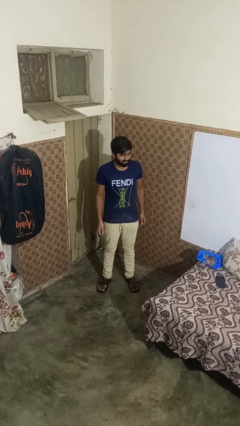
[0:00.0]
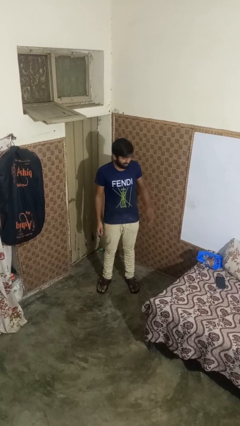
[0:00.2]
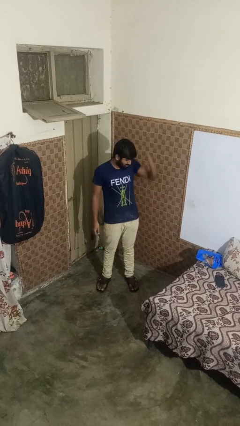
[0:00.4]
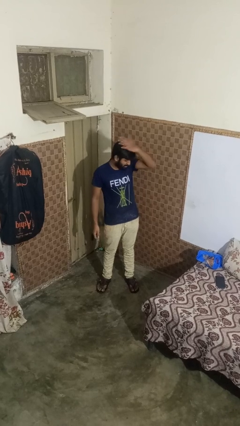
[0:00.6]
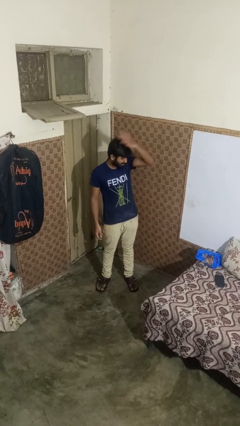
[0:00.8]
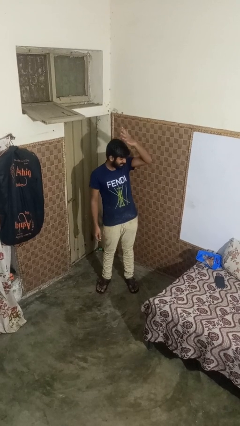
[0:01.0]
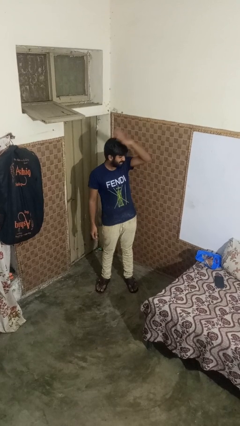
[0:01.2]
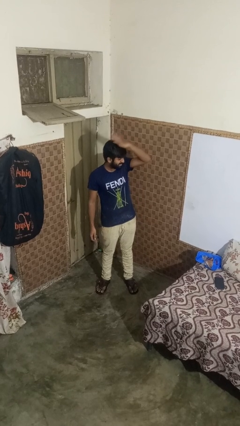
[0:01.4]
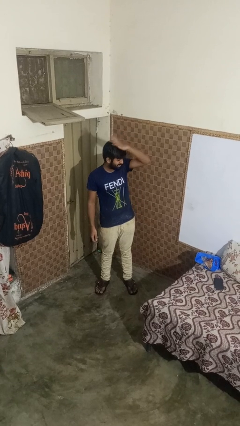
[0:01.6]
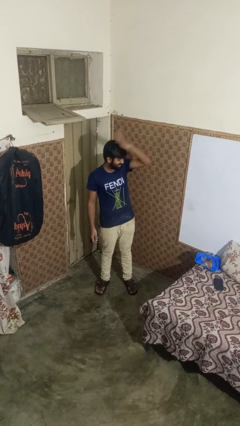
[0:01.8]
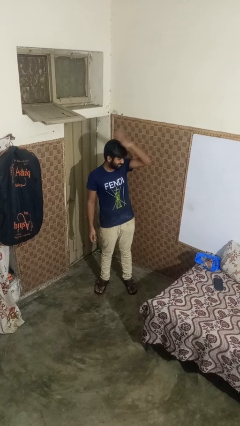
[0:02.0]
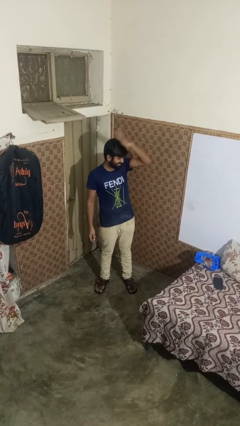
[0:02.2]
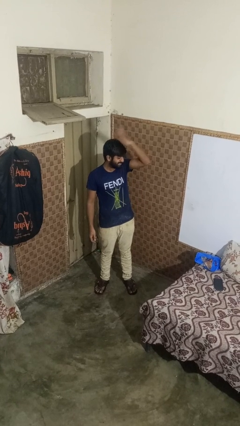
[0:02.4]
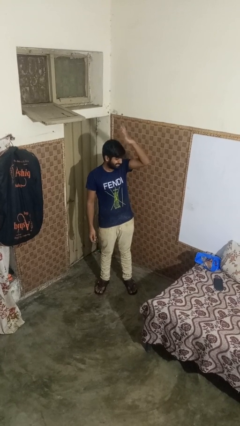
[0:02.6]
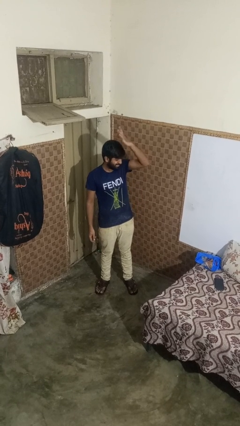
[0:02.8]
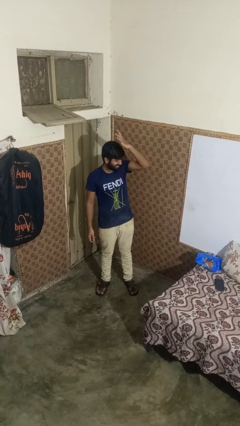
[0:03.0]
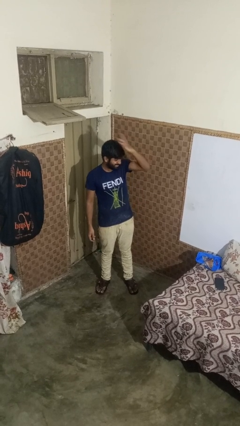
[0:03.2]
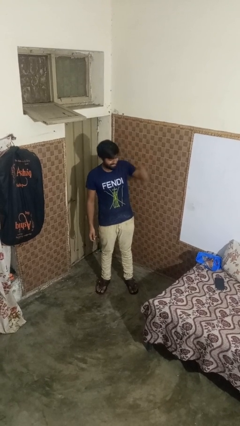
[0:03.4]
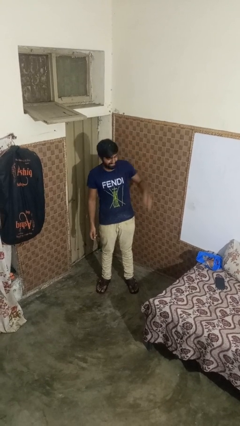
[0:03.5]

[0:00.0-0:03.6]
person pats head

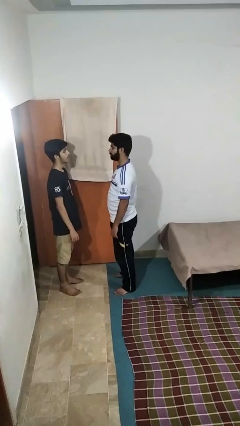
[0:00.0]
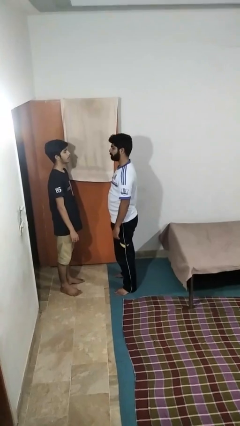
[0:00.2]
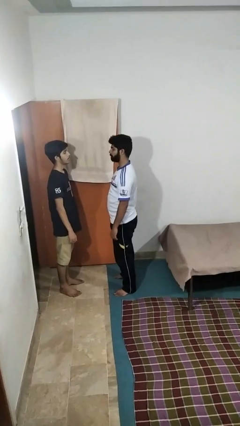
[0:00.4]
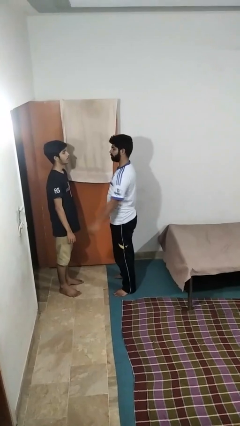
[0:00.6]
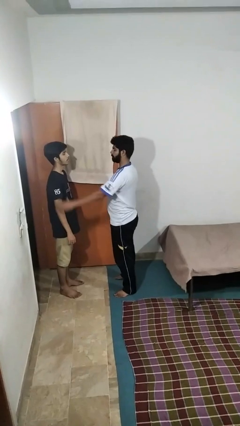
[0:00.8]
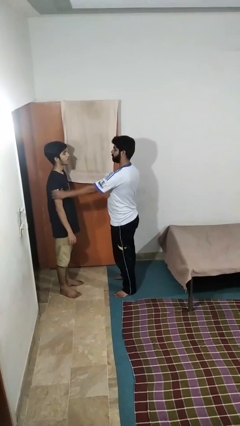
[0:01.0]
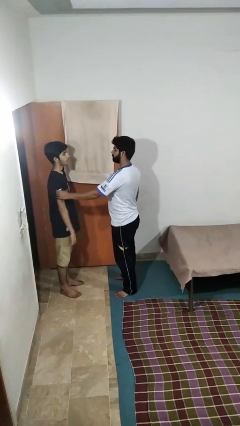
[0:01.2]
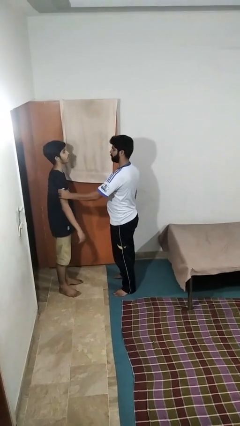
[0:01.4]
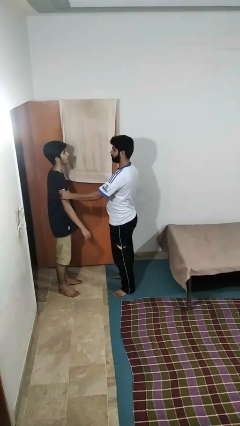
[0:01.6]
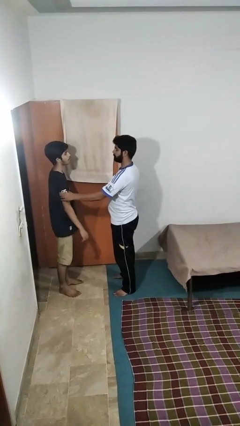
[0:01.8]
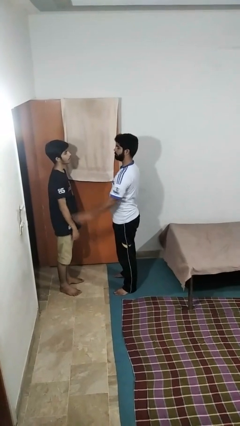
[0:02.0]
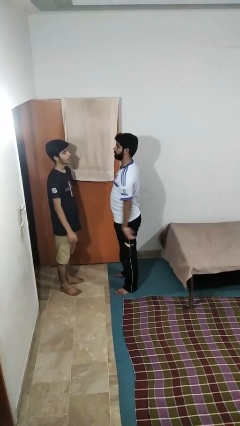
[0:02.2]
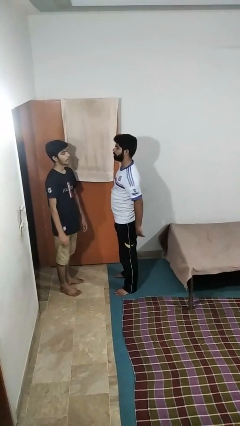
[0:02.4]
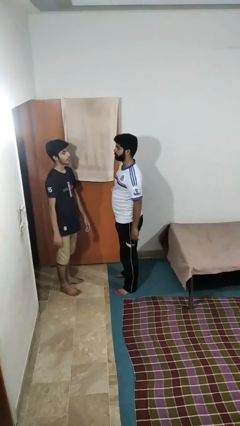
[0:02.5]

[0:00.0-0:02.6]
person grabs person by bicep

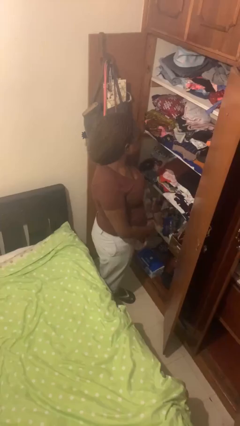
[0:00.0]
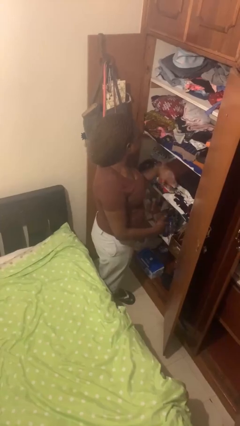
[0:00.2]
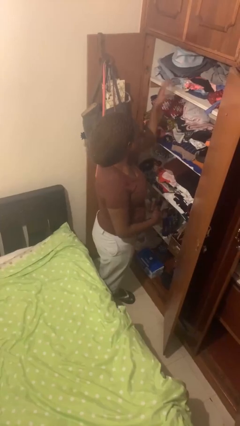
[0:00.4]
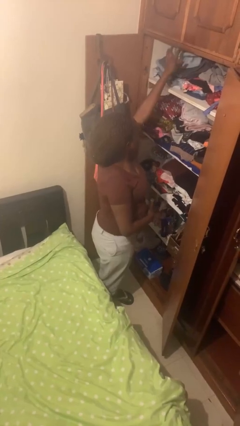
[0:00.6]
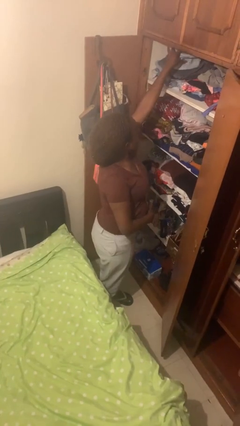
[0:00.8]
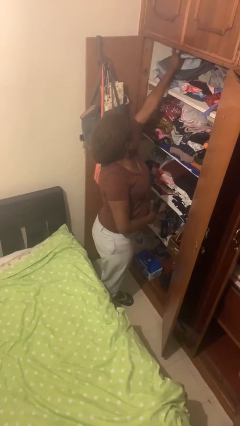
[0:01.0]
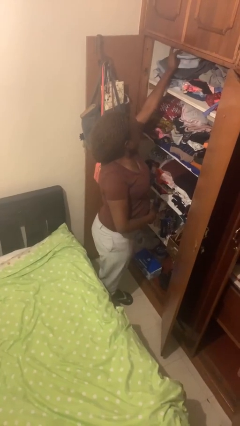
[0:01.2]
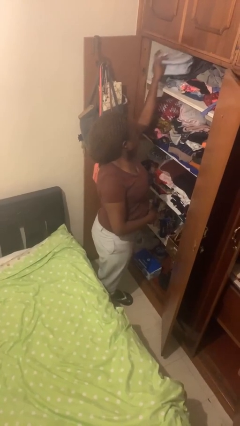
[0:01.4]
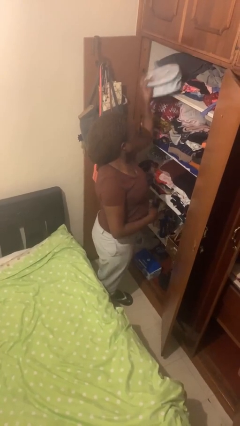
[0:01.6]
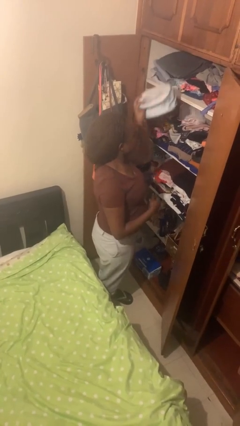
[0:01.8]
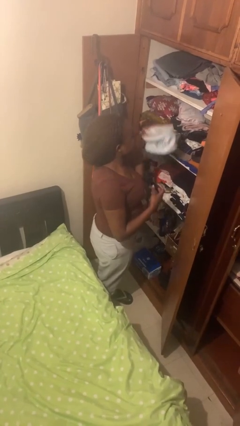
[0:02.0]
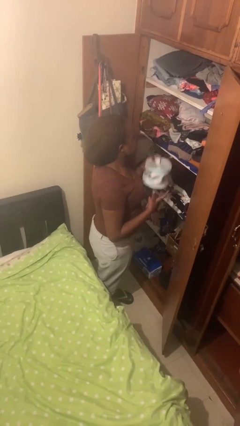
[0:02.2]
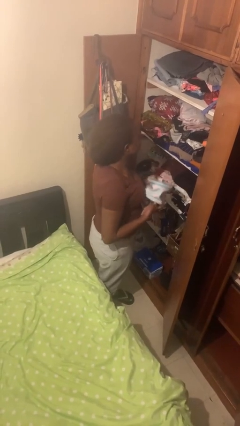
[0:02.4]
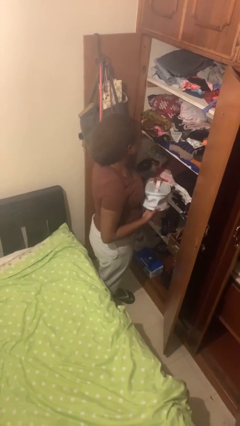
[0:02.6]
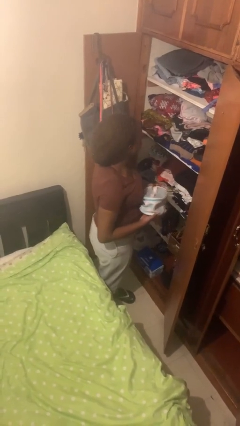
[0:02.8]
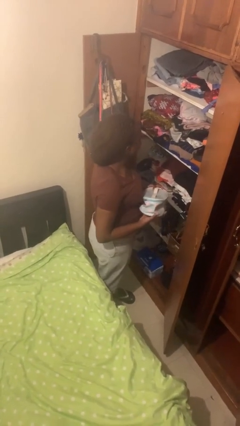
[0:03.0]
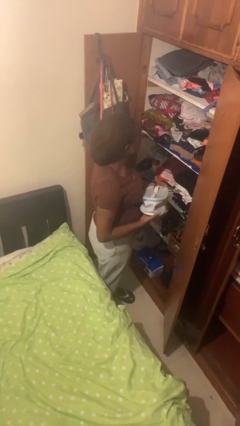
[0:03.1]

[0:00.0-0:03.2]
person picks up object from shelf

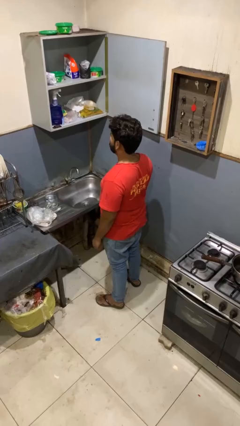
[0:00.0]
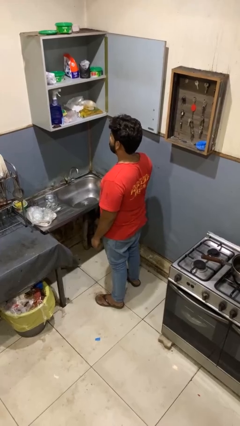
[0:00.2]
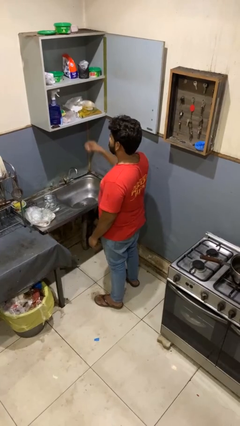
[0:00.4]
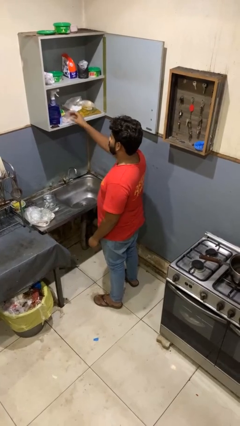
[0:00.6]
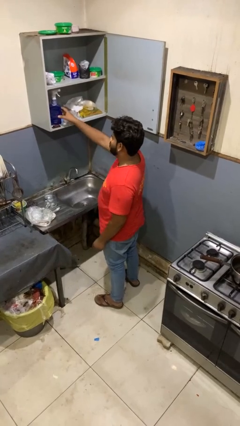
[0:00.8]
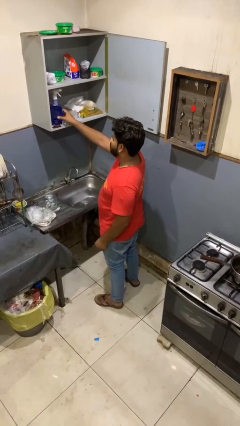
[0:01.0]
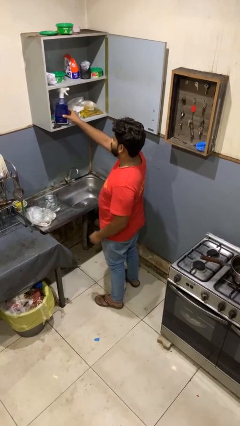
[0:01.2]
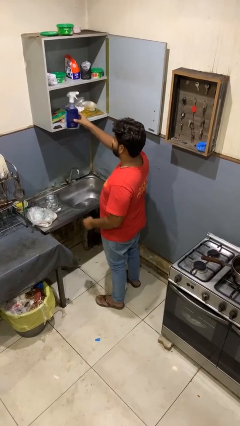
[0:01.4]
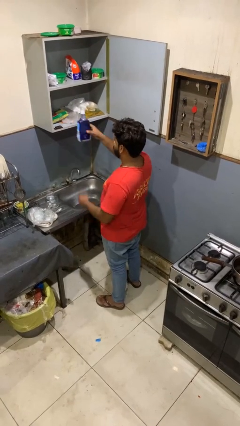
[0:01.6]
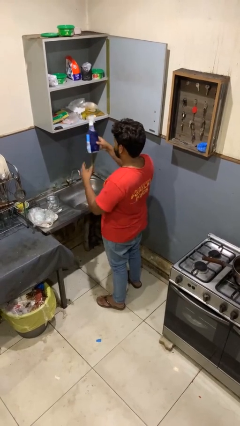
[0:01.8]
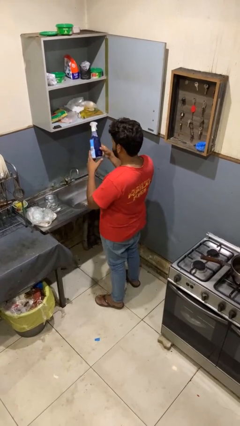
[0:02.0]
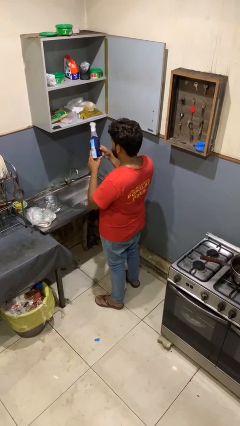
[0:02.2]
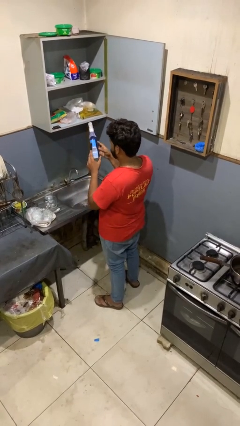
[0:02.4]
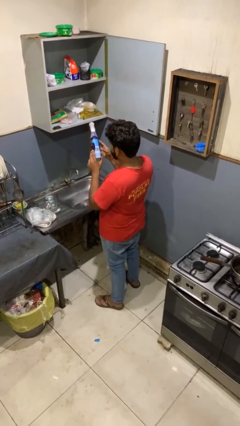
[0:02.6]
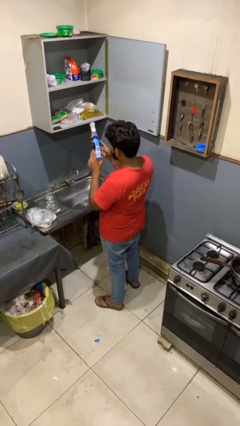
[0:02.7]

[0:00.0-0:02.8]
person picks up object from cabinet

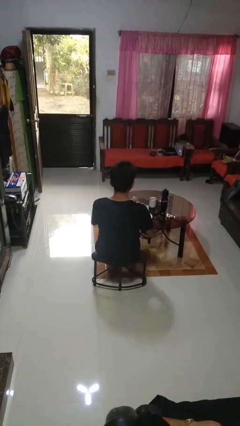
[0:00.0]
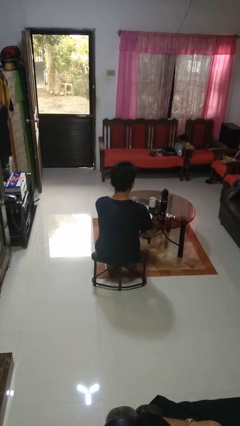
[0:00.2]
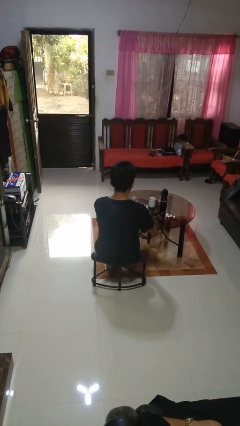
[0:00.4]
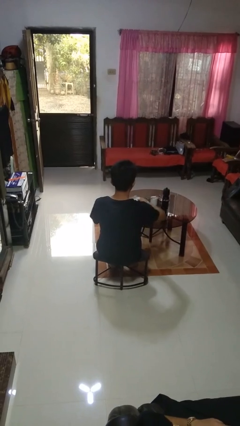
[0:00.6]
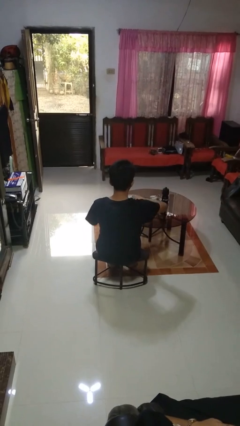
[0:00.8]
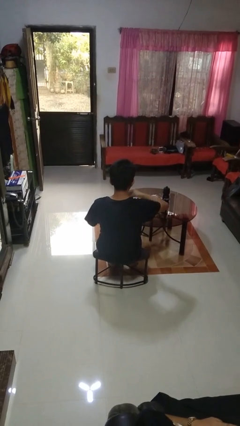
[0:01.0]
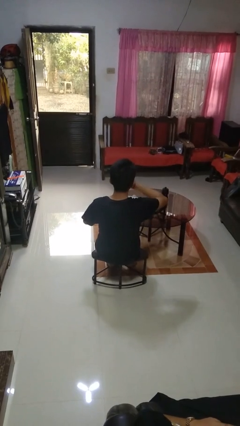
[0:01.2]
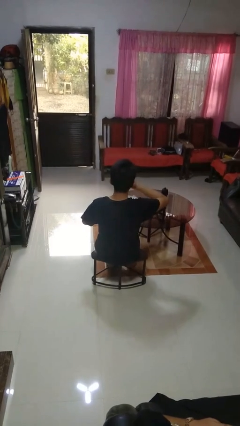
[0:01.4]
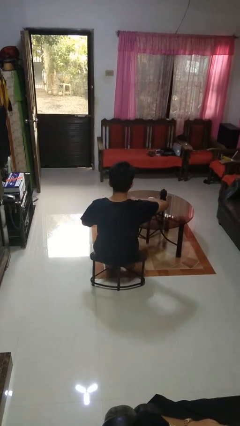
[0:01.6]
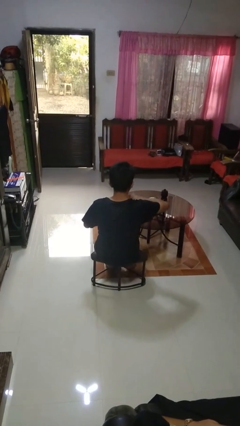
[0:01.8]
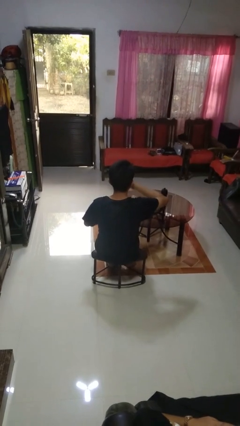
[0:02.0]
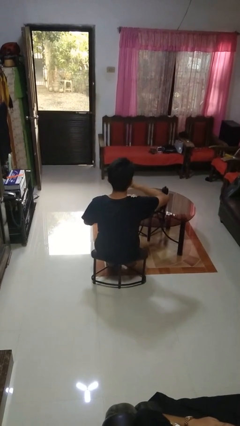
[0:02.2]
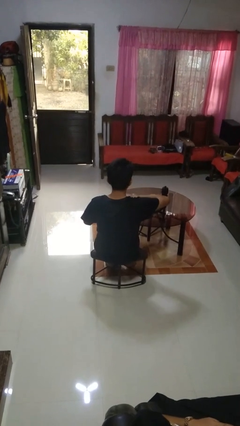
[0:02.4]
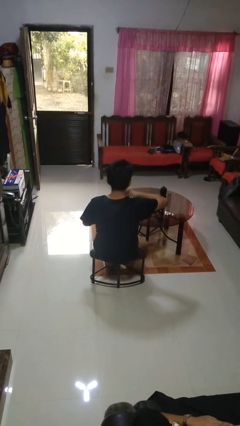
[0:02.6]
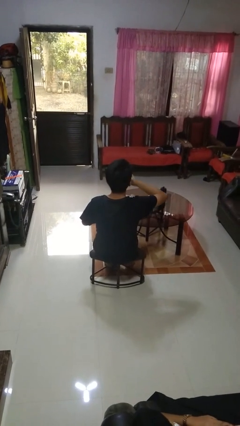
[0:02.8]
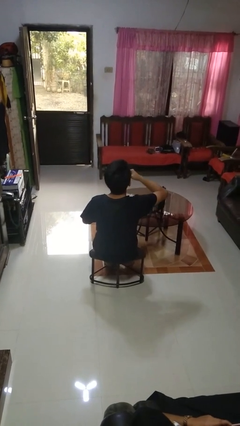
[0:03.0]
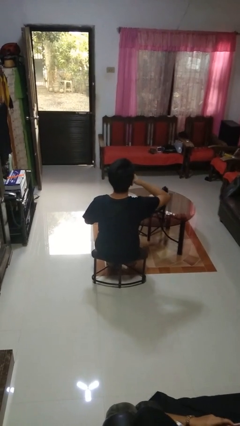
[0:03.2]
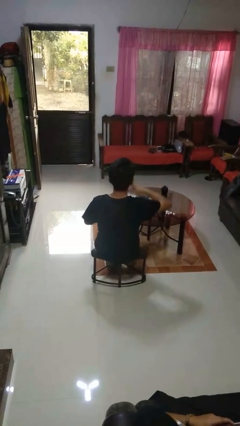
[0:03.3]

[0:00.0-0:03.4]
person eats with hands

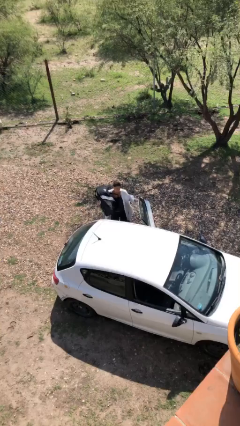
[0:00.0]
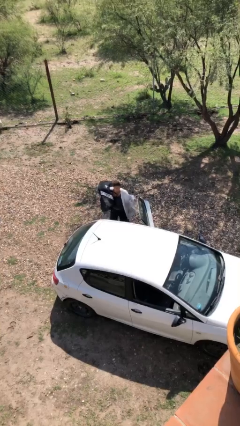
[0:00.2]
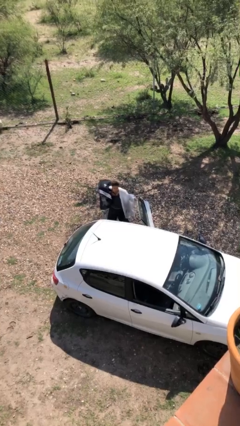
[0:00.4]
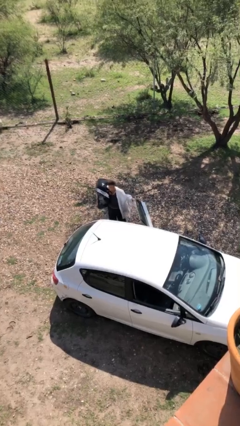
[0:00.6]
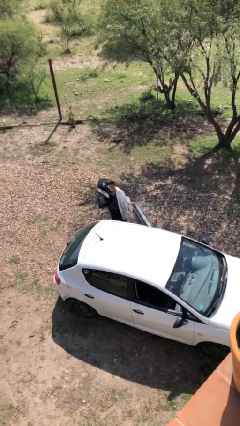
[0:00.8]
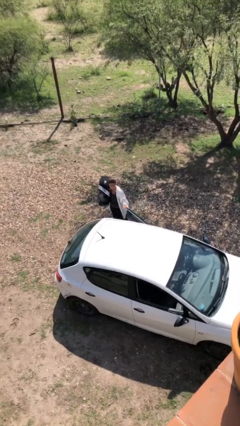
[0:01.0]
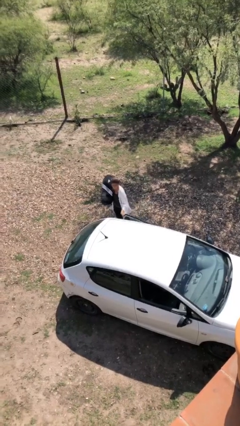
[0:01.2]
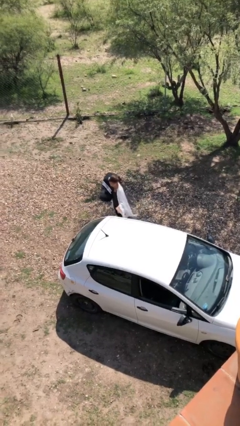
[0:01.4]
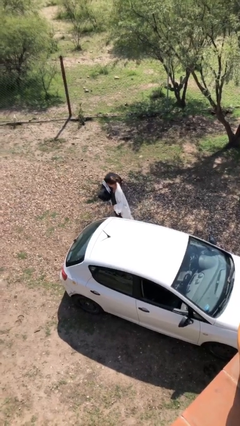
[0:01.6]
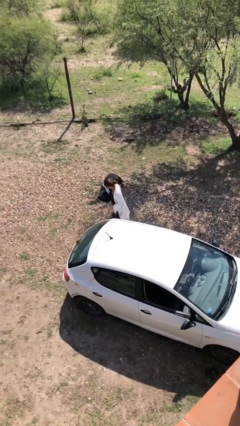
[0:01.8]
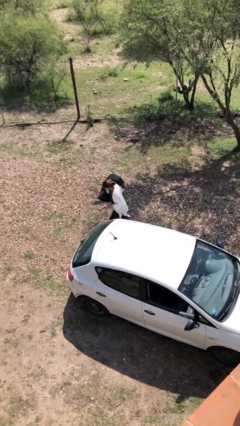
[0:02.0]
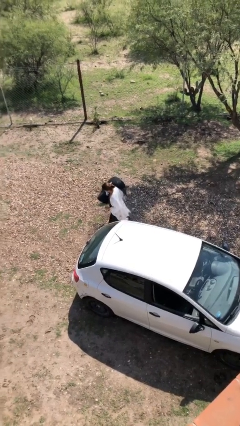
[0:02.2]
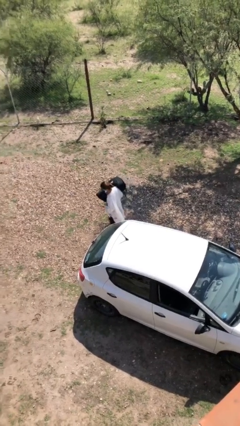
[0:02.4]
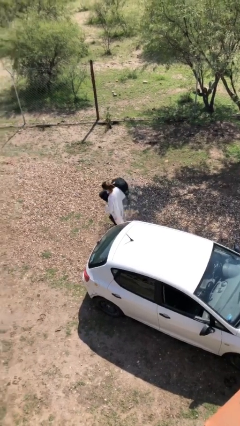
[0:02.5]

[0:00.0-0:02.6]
person closes car door
